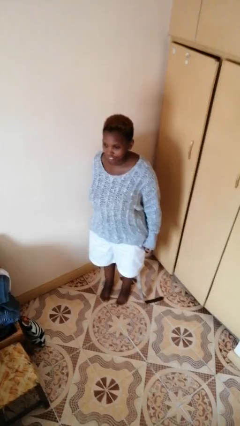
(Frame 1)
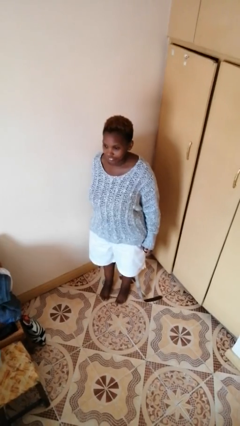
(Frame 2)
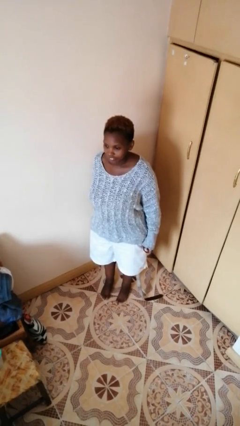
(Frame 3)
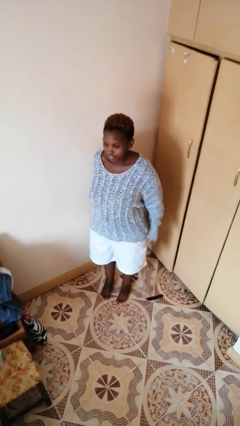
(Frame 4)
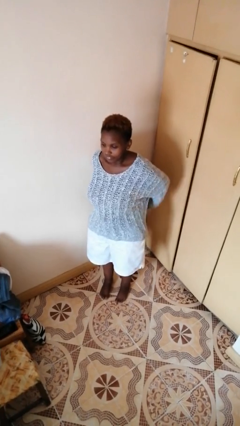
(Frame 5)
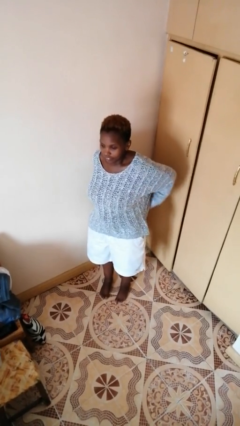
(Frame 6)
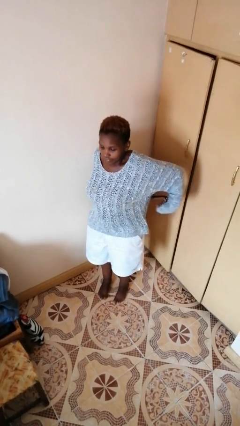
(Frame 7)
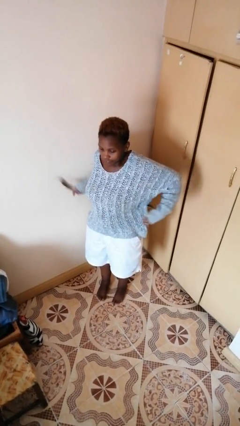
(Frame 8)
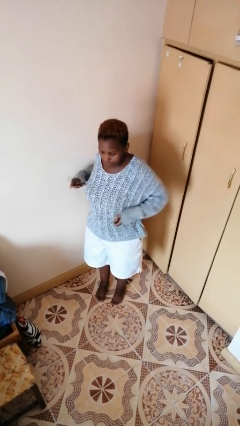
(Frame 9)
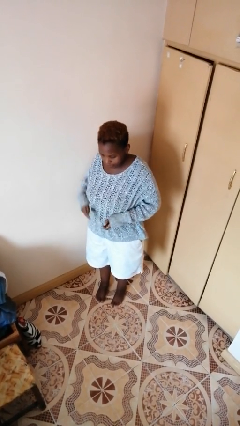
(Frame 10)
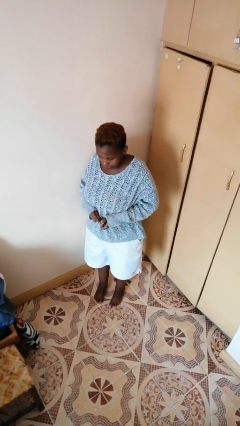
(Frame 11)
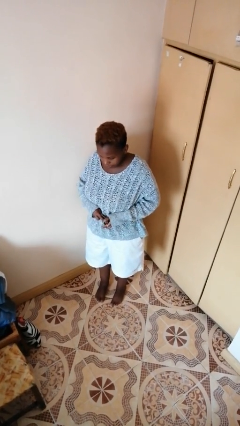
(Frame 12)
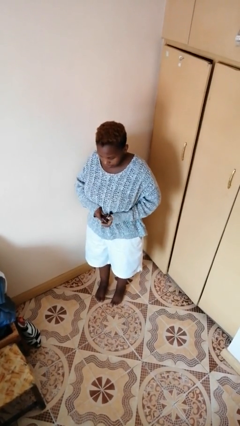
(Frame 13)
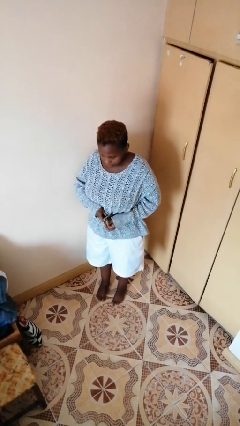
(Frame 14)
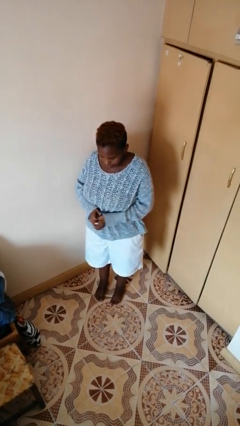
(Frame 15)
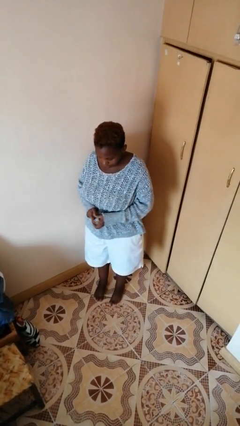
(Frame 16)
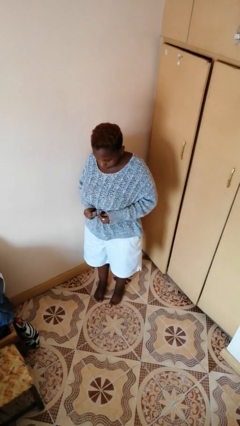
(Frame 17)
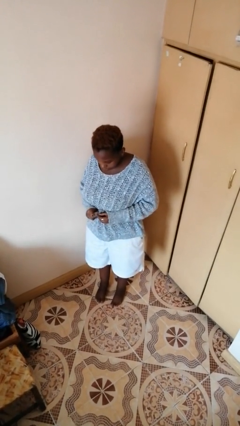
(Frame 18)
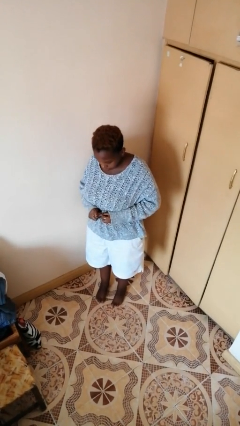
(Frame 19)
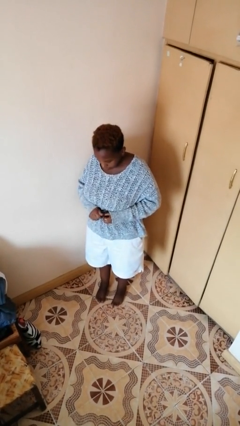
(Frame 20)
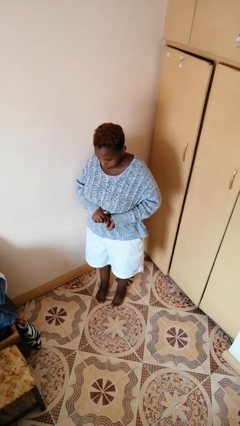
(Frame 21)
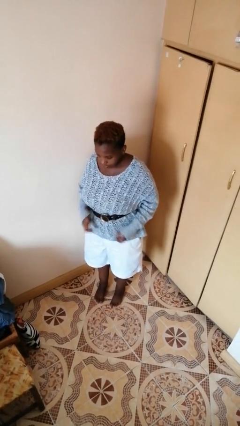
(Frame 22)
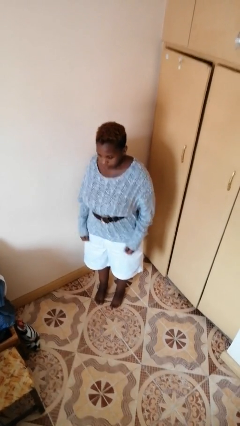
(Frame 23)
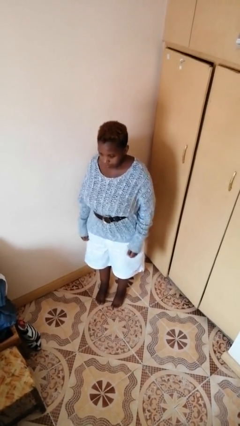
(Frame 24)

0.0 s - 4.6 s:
person puts on belt

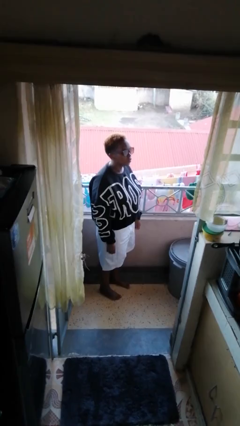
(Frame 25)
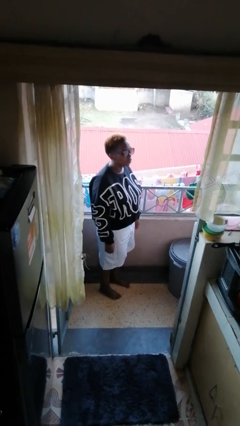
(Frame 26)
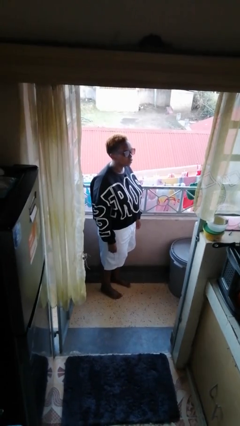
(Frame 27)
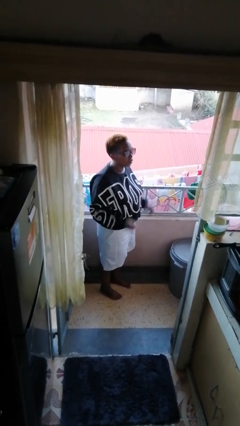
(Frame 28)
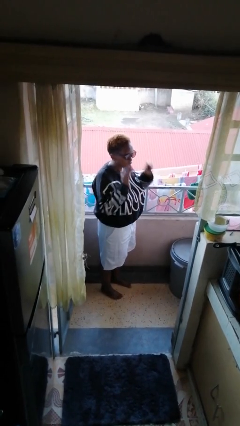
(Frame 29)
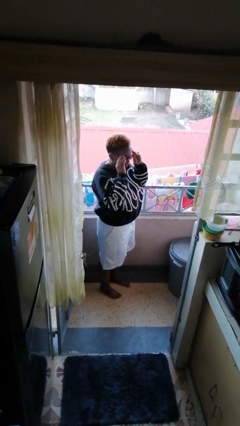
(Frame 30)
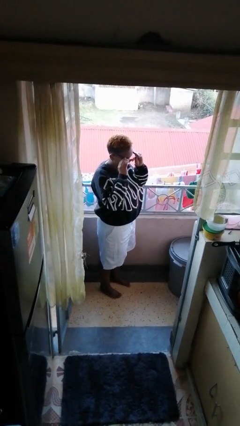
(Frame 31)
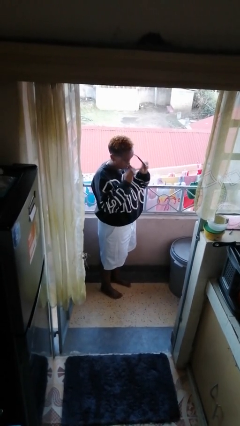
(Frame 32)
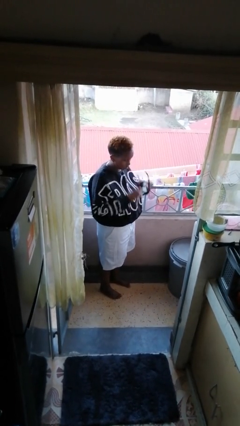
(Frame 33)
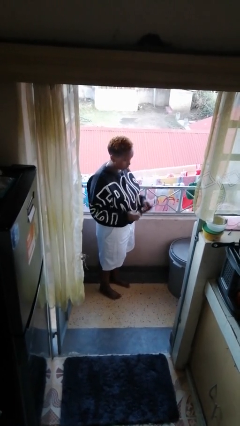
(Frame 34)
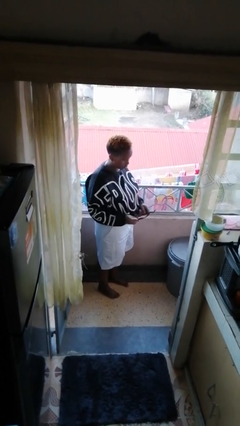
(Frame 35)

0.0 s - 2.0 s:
person takes off sunglasses

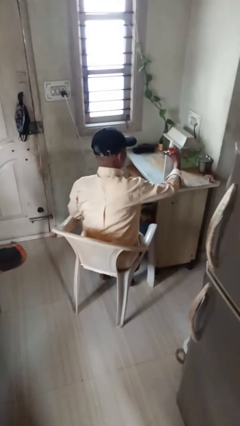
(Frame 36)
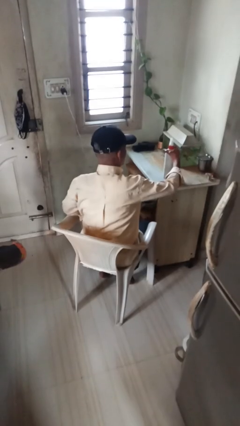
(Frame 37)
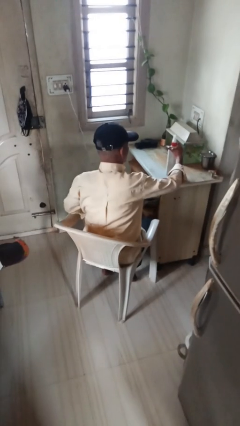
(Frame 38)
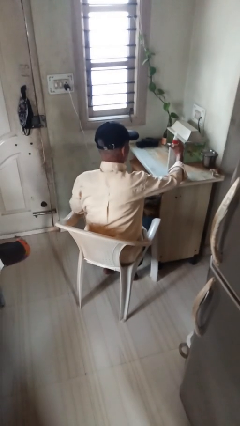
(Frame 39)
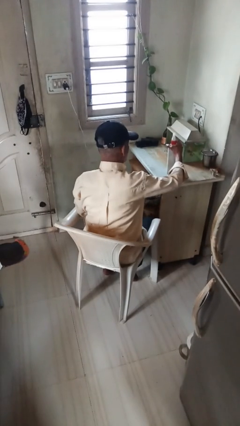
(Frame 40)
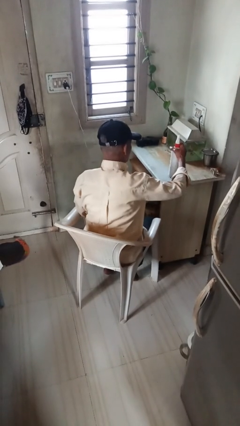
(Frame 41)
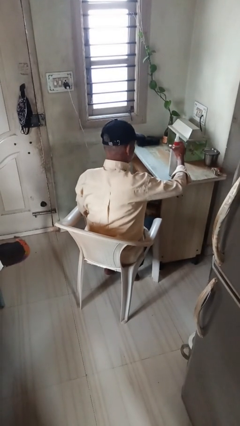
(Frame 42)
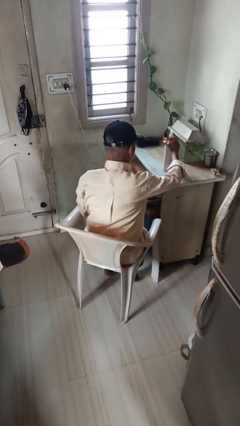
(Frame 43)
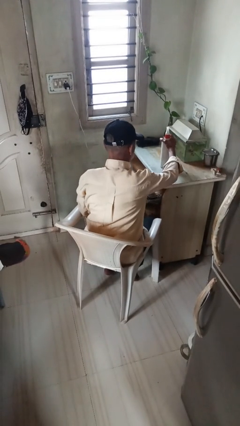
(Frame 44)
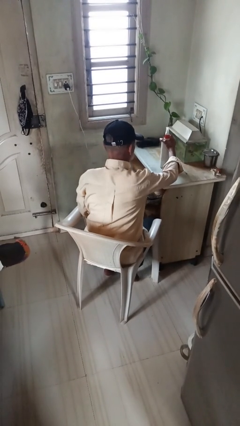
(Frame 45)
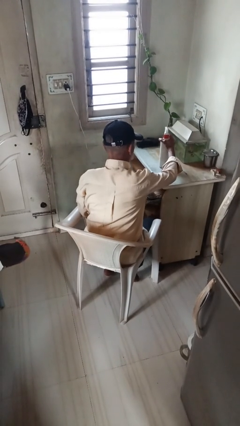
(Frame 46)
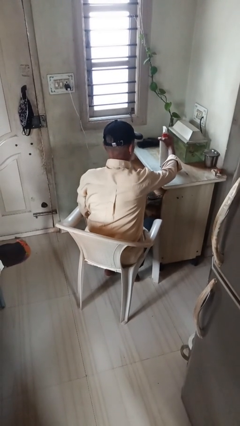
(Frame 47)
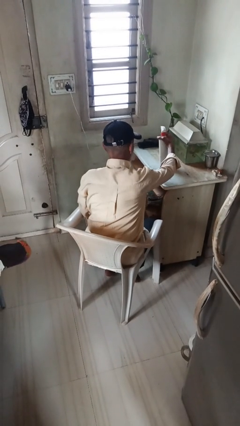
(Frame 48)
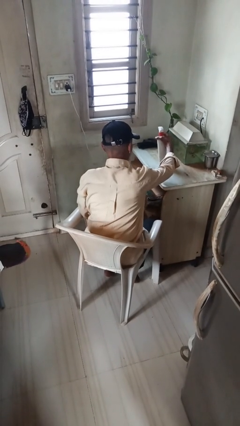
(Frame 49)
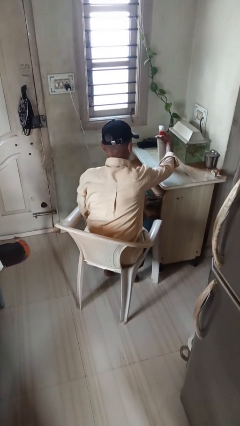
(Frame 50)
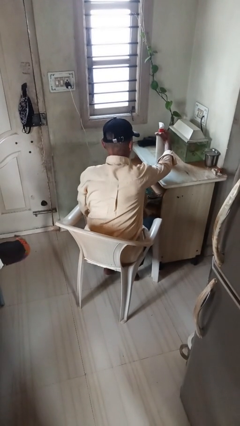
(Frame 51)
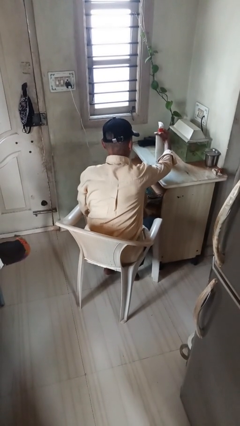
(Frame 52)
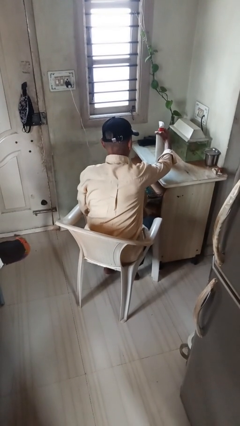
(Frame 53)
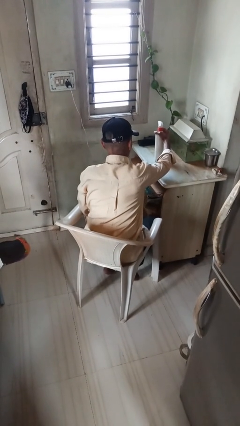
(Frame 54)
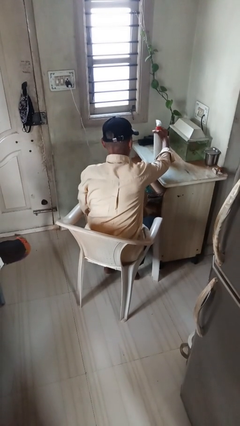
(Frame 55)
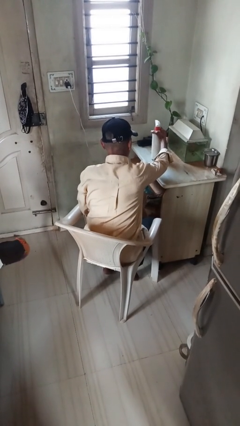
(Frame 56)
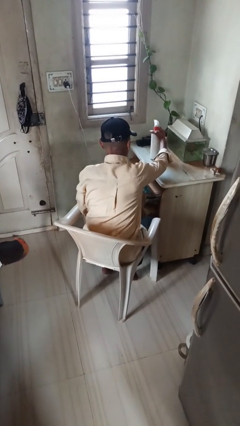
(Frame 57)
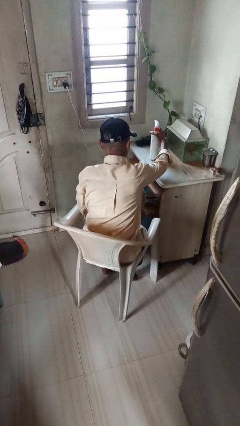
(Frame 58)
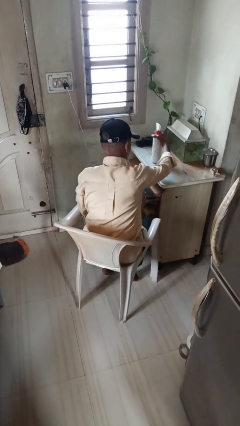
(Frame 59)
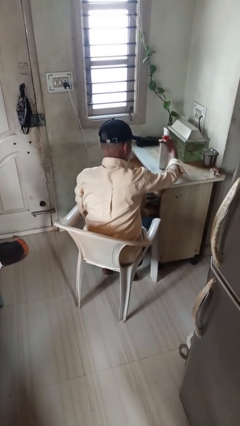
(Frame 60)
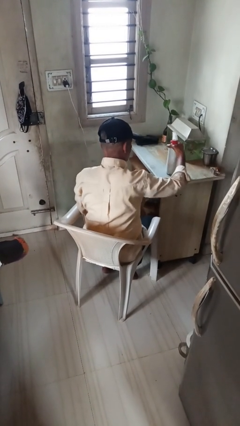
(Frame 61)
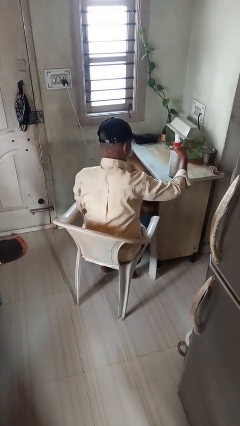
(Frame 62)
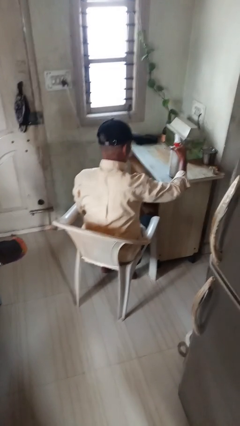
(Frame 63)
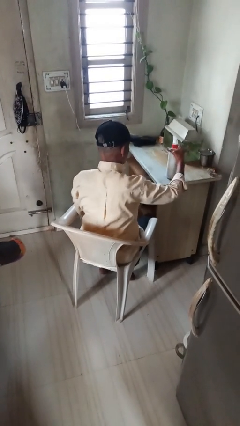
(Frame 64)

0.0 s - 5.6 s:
person sprays from bottle

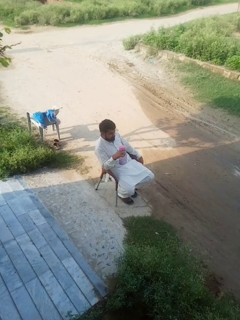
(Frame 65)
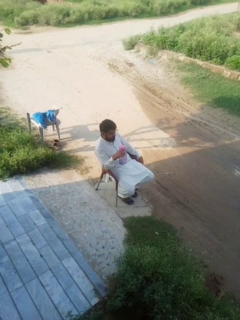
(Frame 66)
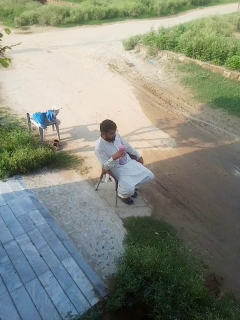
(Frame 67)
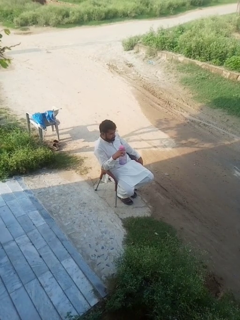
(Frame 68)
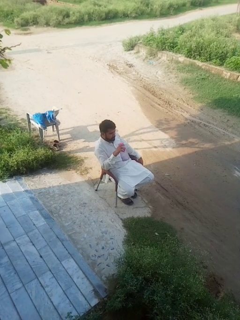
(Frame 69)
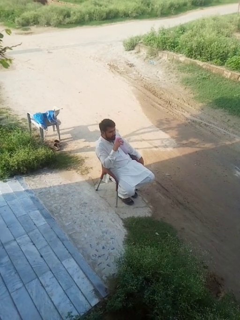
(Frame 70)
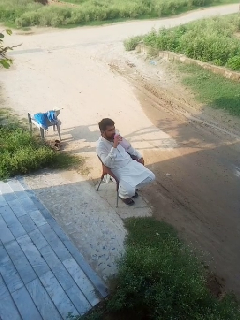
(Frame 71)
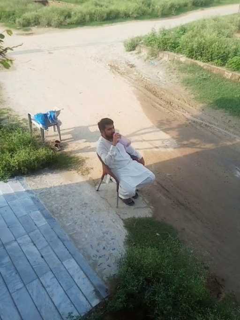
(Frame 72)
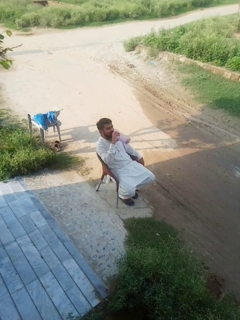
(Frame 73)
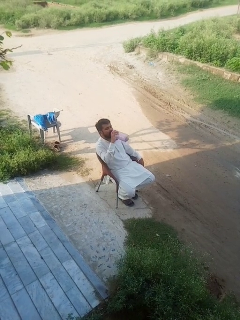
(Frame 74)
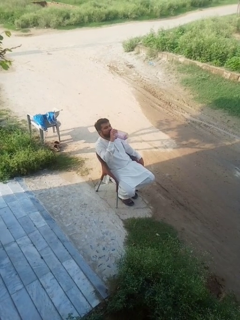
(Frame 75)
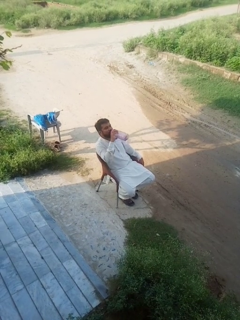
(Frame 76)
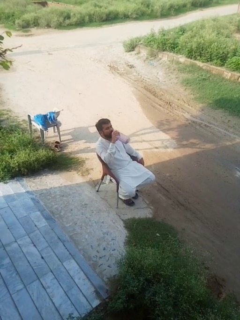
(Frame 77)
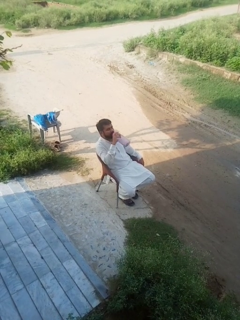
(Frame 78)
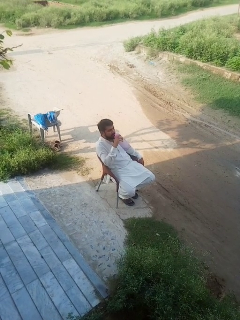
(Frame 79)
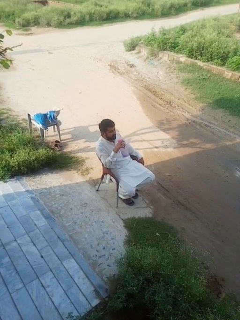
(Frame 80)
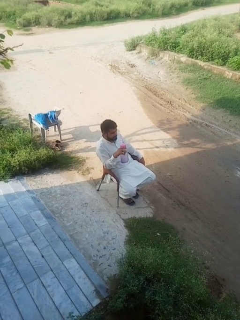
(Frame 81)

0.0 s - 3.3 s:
person drinks from bottle

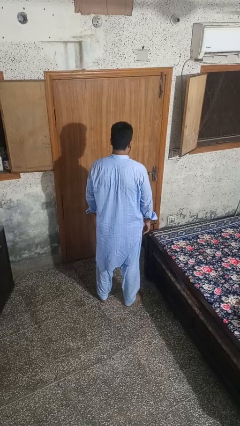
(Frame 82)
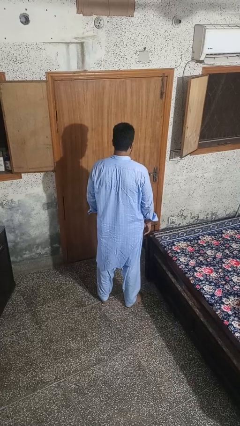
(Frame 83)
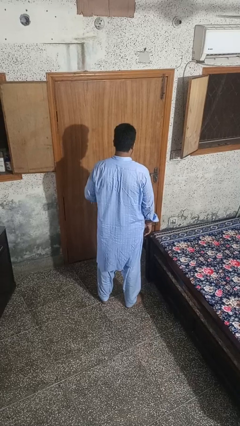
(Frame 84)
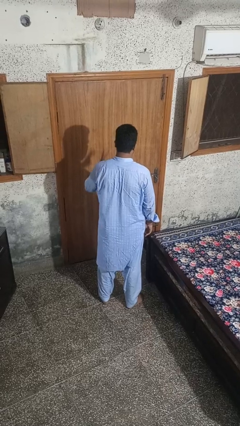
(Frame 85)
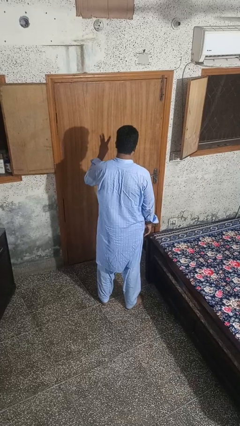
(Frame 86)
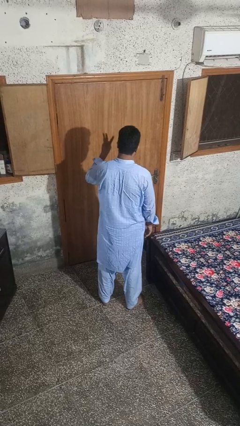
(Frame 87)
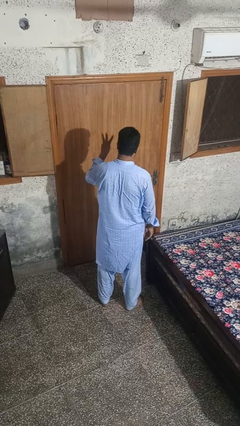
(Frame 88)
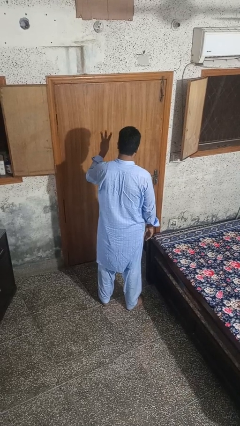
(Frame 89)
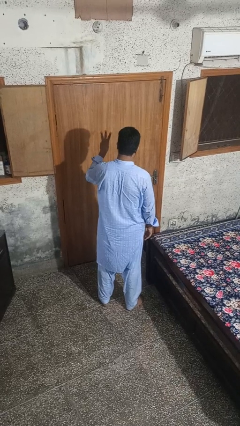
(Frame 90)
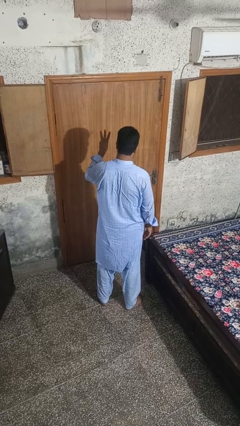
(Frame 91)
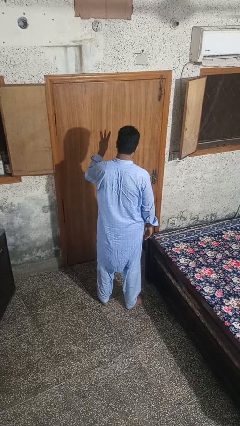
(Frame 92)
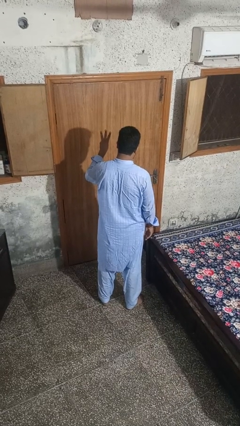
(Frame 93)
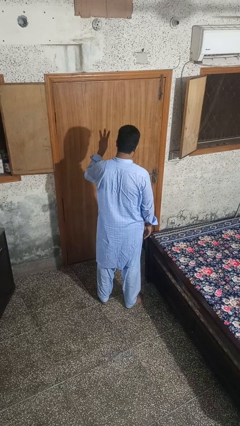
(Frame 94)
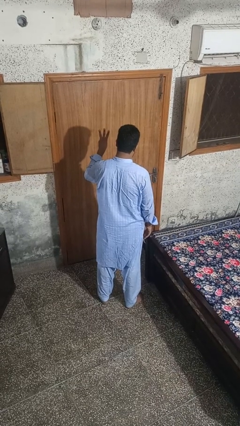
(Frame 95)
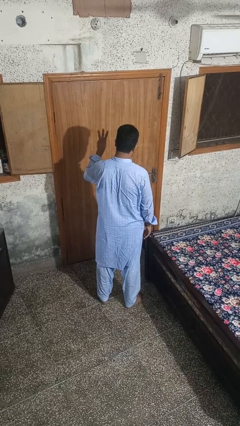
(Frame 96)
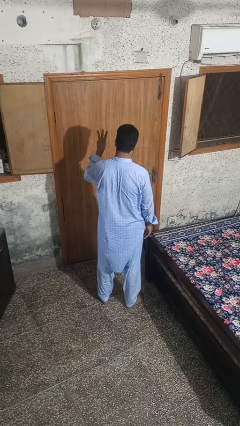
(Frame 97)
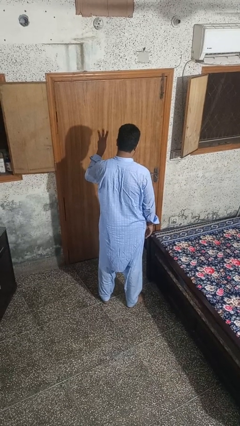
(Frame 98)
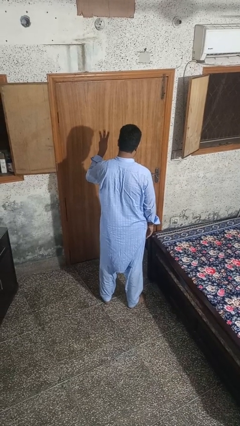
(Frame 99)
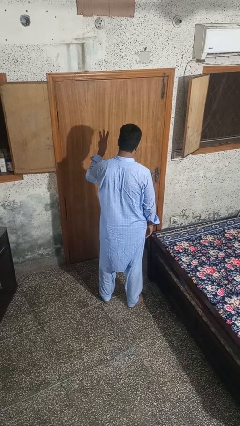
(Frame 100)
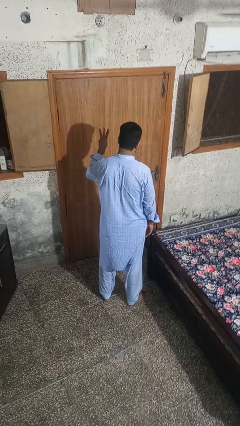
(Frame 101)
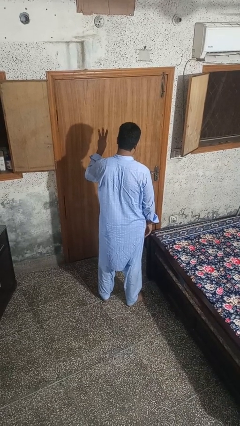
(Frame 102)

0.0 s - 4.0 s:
person gestures number three
